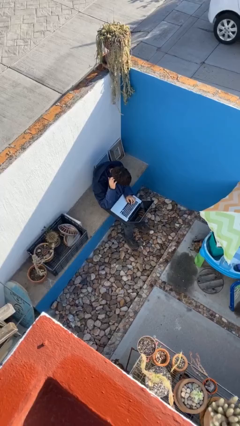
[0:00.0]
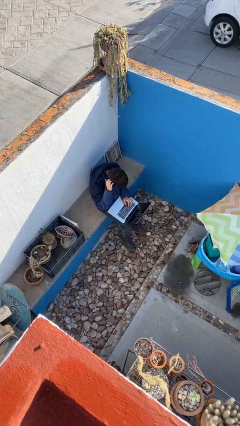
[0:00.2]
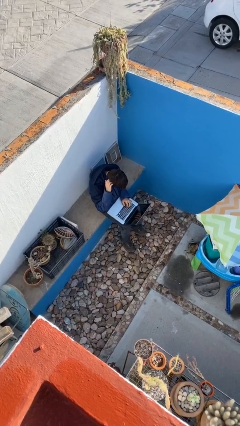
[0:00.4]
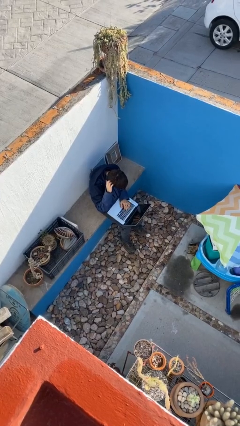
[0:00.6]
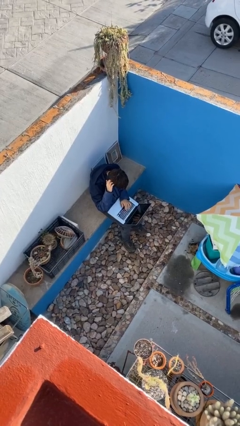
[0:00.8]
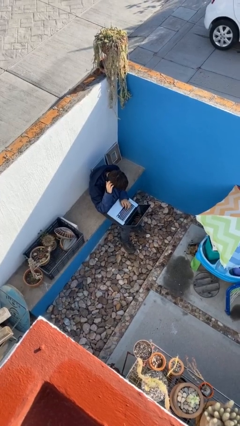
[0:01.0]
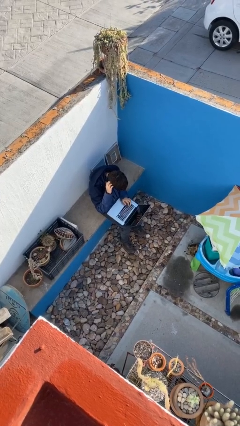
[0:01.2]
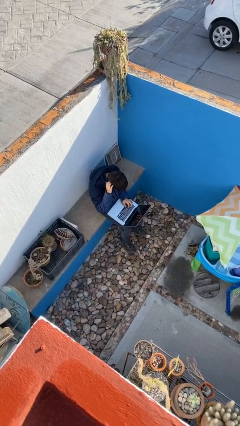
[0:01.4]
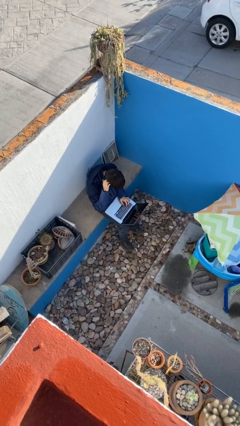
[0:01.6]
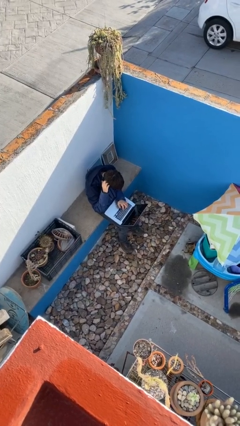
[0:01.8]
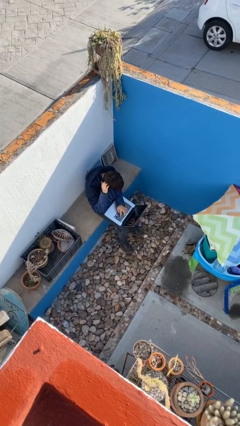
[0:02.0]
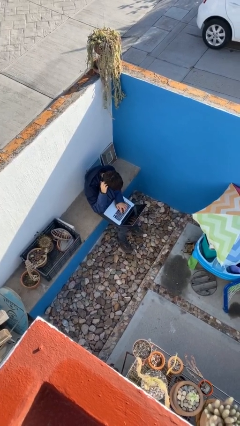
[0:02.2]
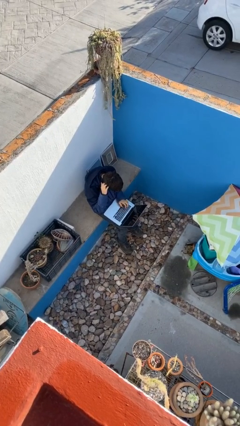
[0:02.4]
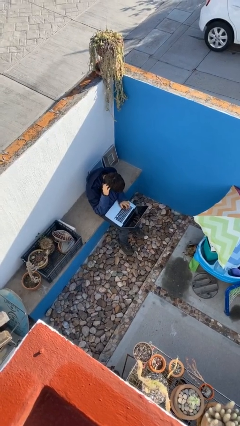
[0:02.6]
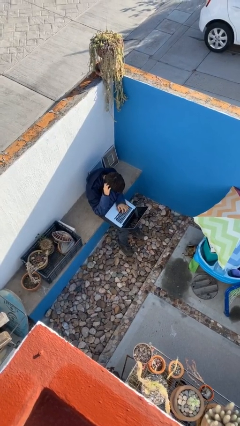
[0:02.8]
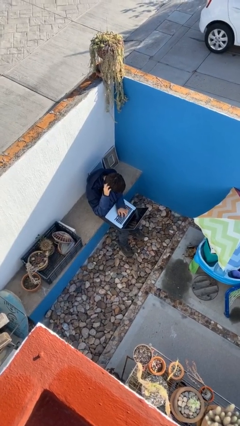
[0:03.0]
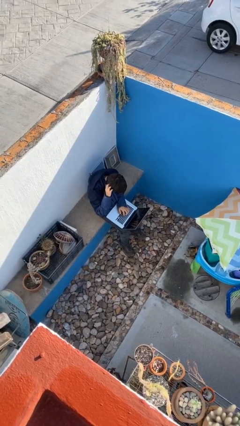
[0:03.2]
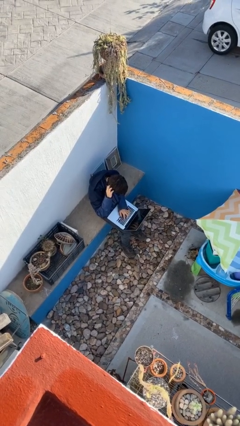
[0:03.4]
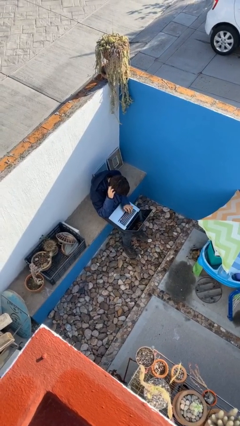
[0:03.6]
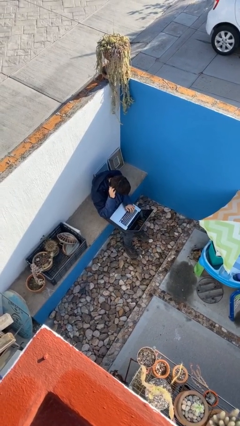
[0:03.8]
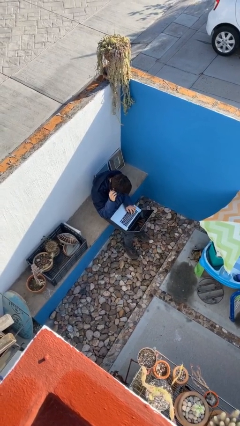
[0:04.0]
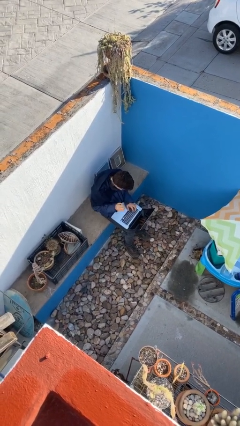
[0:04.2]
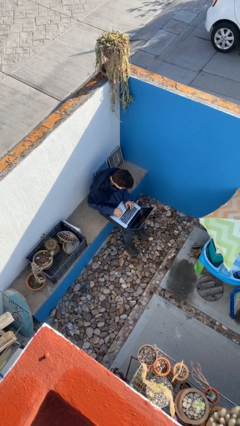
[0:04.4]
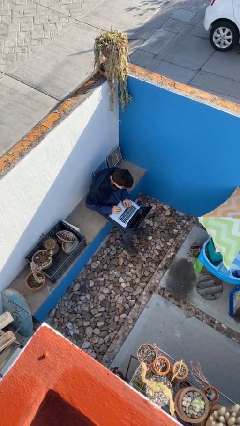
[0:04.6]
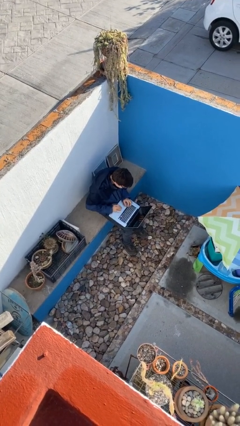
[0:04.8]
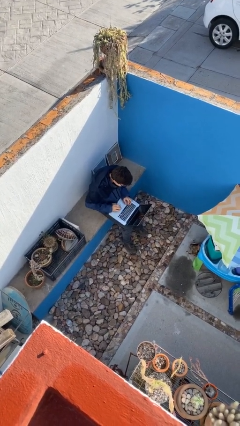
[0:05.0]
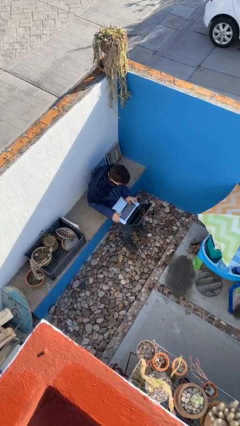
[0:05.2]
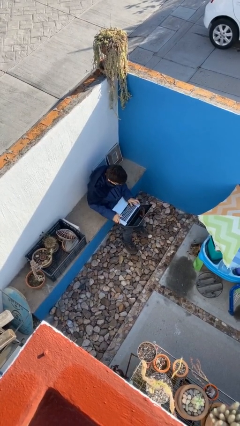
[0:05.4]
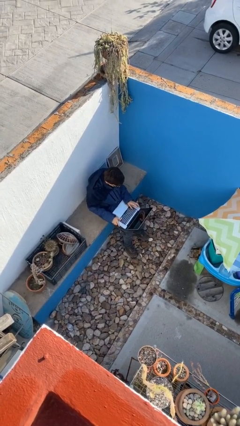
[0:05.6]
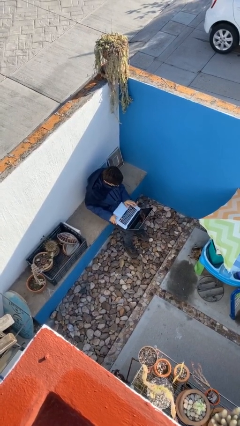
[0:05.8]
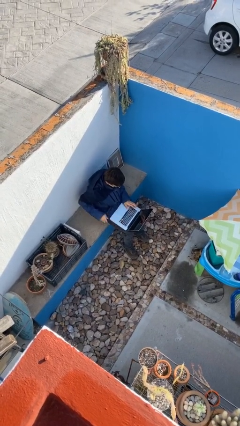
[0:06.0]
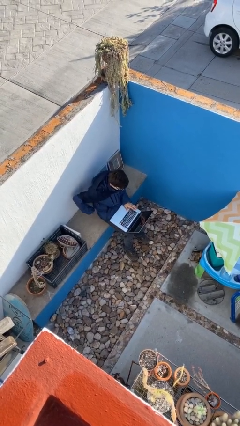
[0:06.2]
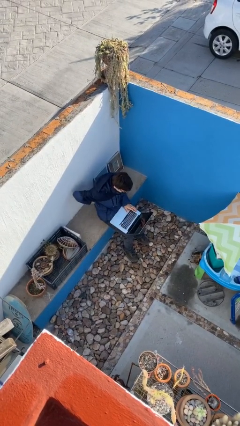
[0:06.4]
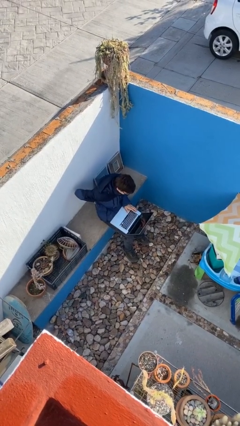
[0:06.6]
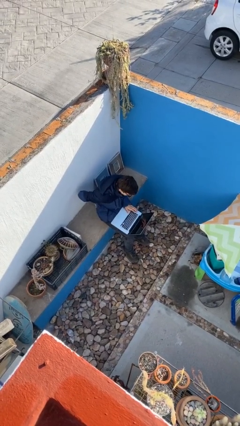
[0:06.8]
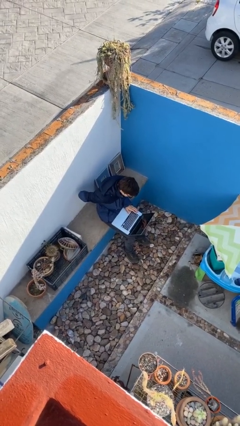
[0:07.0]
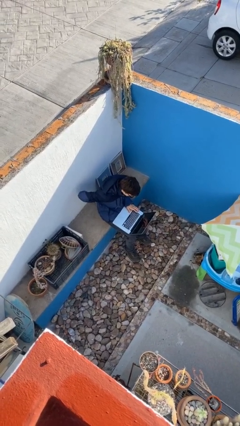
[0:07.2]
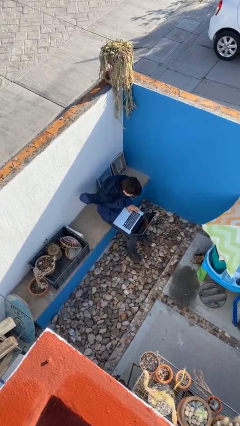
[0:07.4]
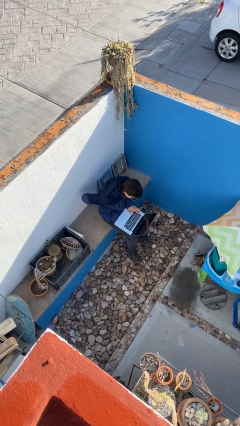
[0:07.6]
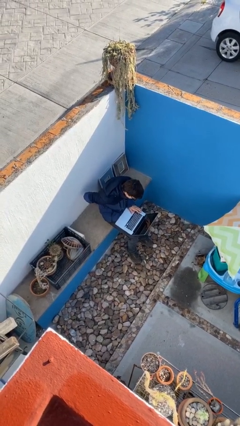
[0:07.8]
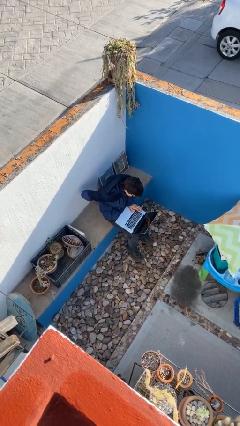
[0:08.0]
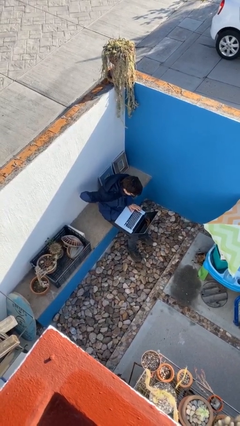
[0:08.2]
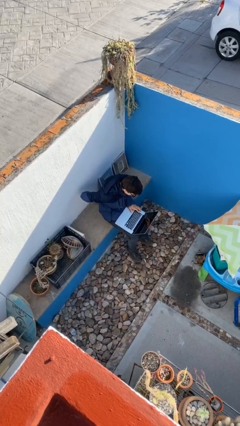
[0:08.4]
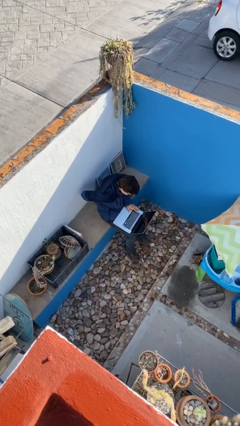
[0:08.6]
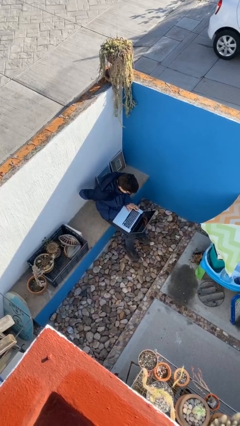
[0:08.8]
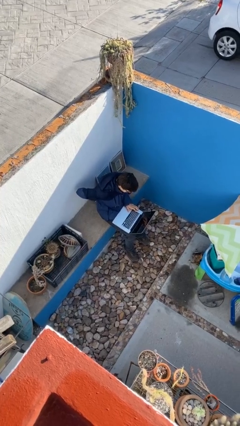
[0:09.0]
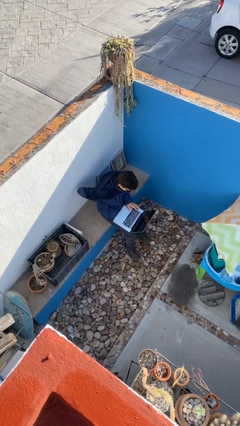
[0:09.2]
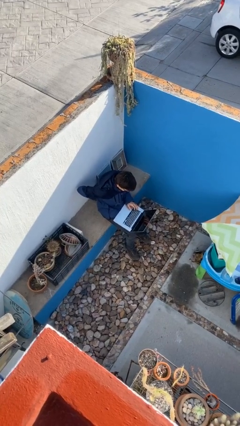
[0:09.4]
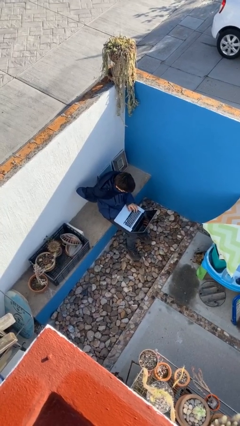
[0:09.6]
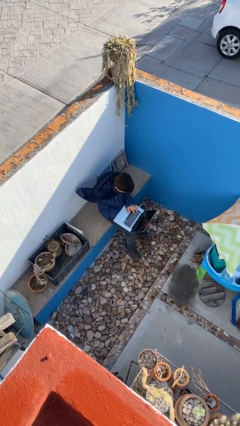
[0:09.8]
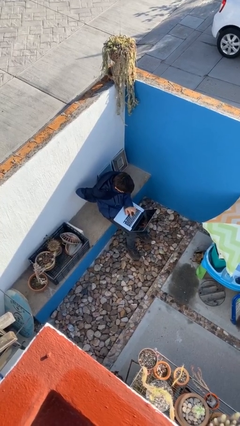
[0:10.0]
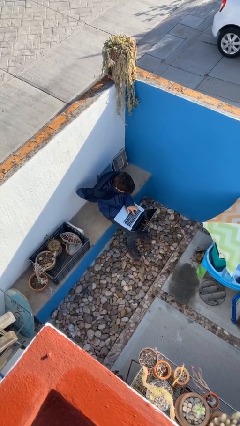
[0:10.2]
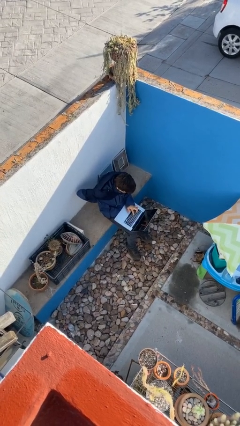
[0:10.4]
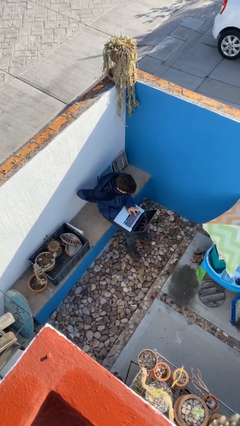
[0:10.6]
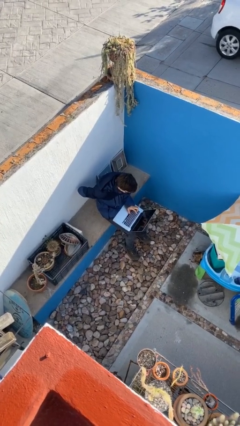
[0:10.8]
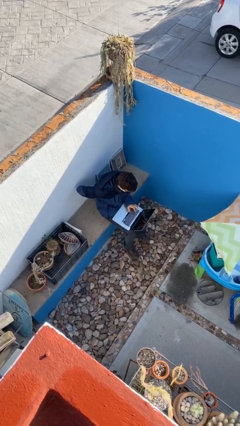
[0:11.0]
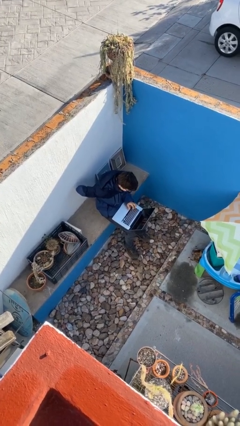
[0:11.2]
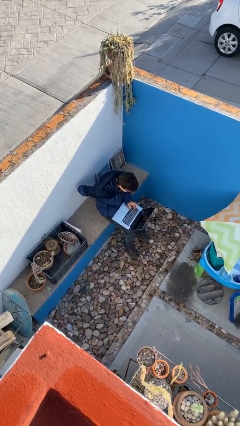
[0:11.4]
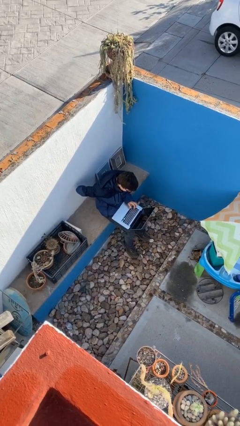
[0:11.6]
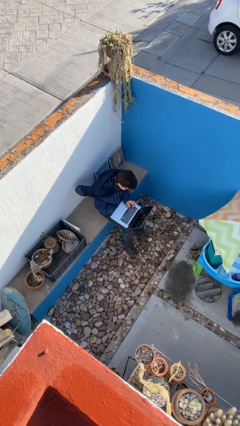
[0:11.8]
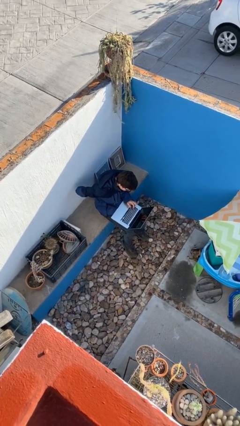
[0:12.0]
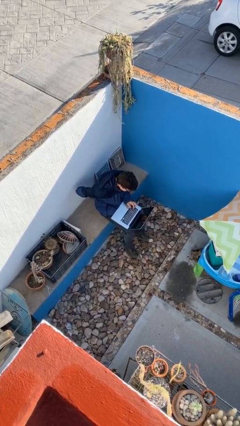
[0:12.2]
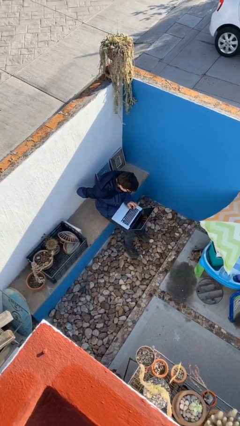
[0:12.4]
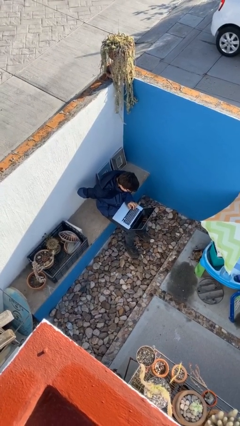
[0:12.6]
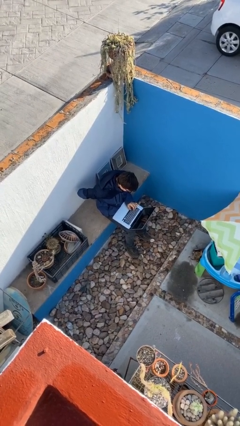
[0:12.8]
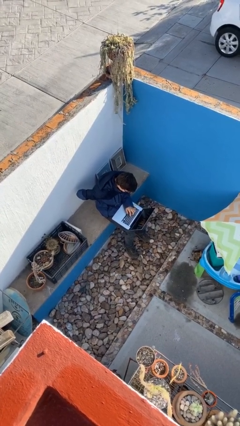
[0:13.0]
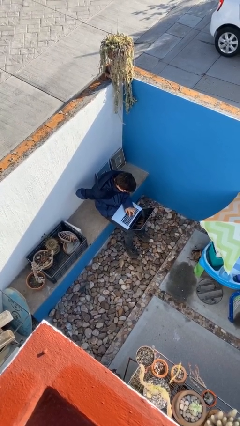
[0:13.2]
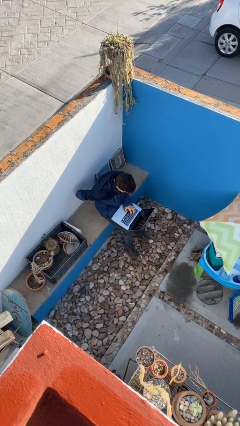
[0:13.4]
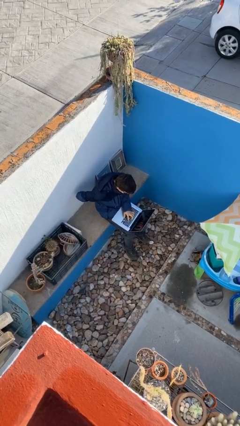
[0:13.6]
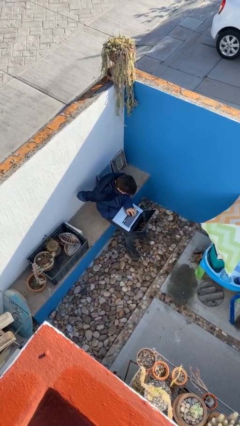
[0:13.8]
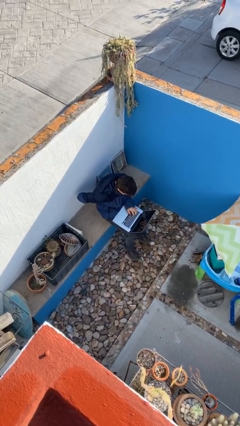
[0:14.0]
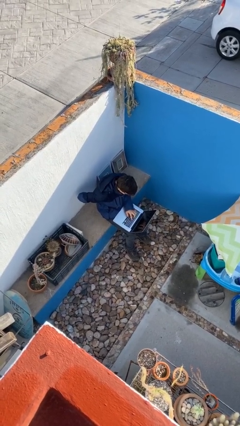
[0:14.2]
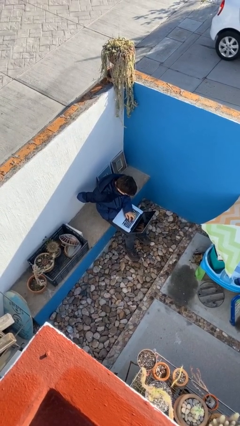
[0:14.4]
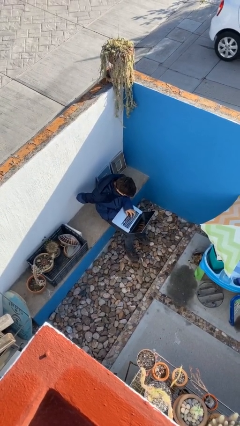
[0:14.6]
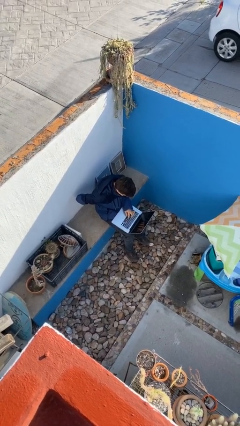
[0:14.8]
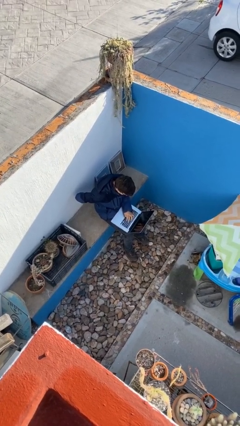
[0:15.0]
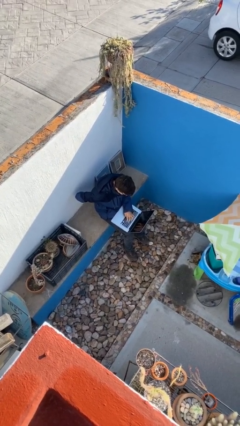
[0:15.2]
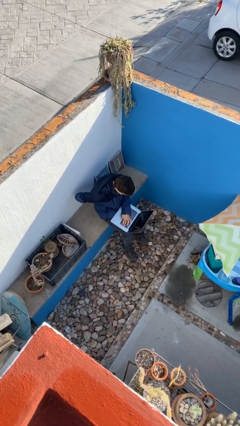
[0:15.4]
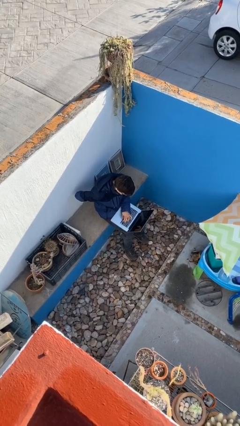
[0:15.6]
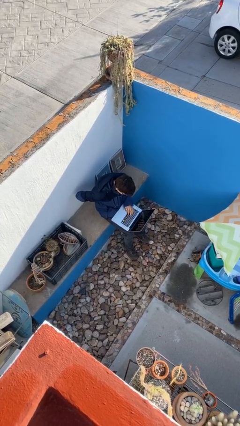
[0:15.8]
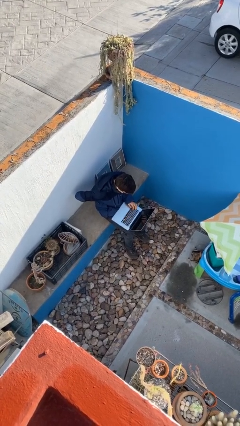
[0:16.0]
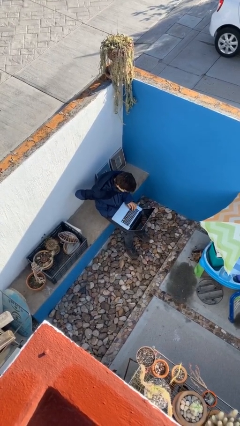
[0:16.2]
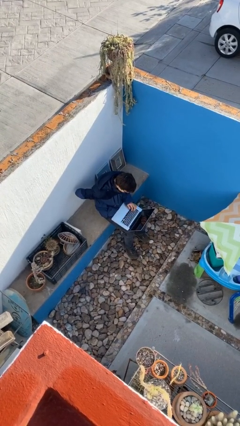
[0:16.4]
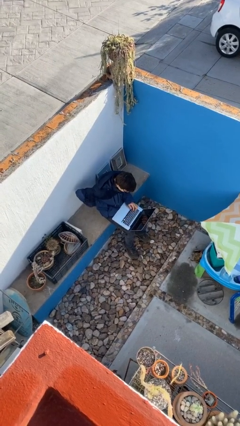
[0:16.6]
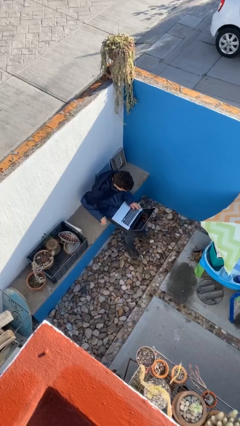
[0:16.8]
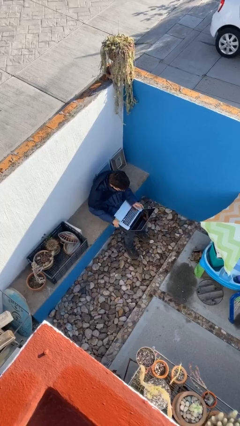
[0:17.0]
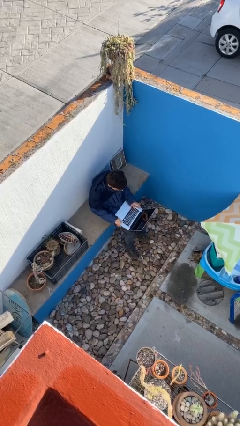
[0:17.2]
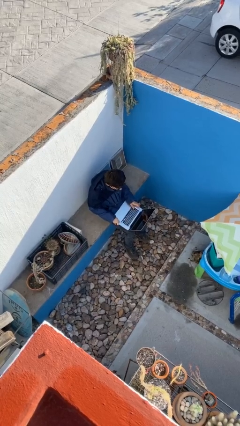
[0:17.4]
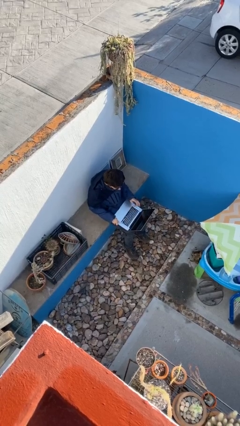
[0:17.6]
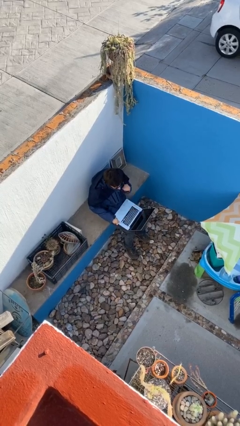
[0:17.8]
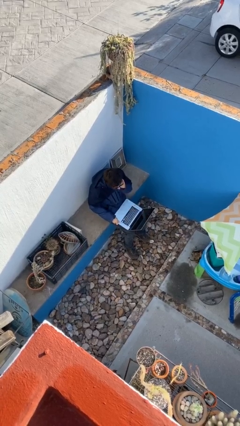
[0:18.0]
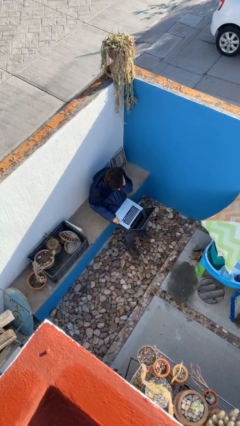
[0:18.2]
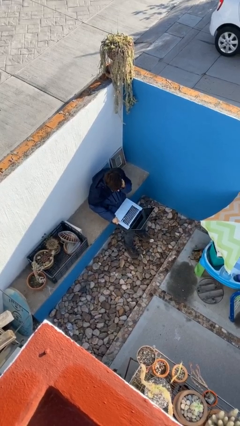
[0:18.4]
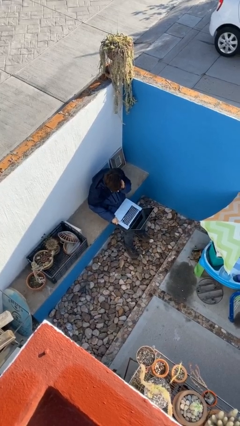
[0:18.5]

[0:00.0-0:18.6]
person interacts with laptop
